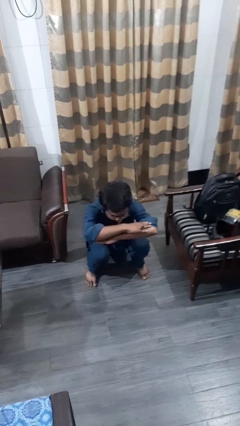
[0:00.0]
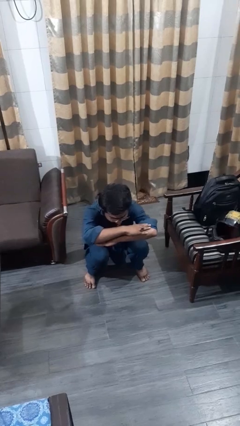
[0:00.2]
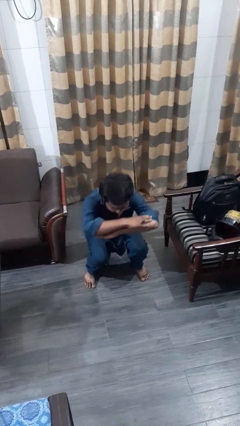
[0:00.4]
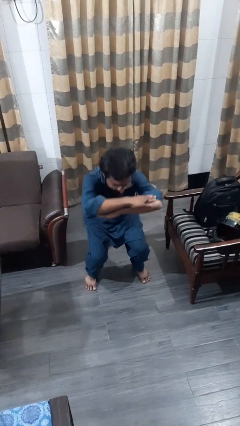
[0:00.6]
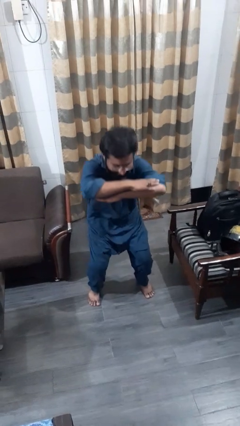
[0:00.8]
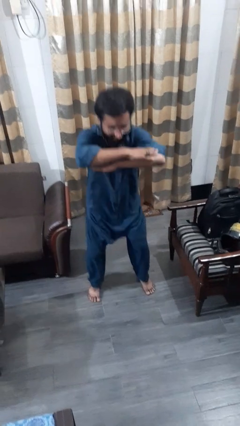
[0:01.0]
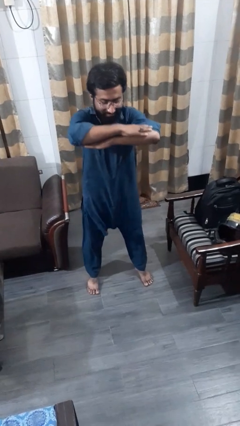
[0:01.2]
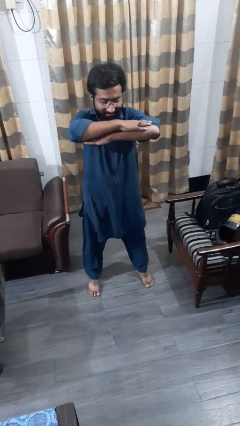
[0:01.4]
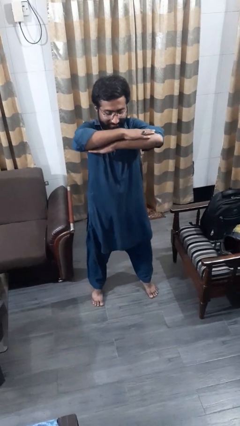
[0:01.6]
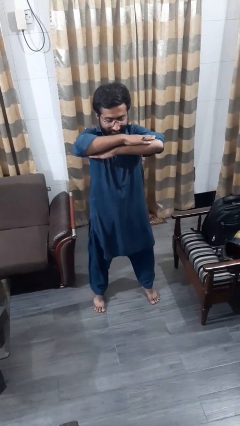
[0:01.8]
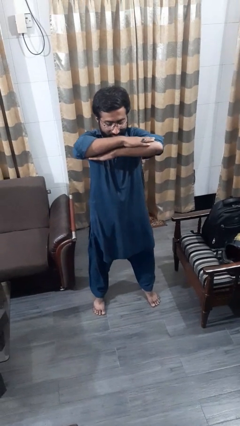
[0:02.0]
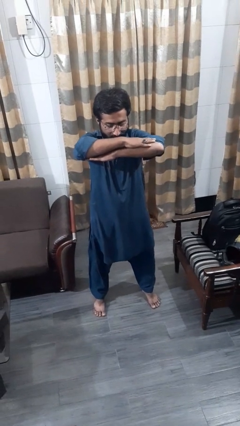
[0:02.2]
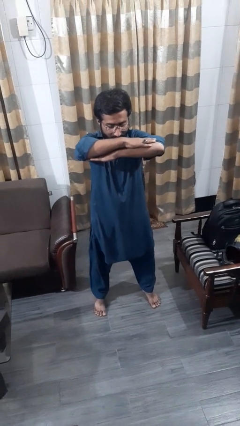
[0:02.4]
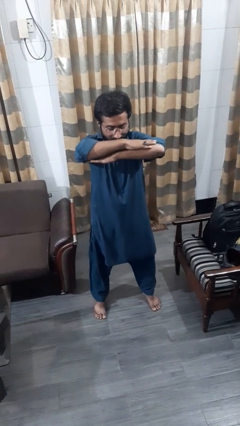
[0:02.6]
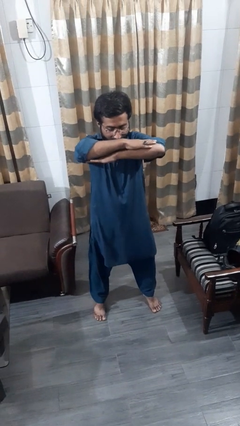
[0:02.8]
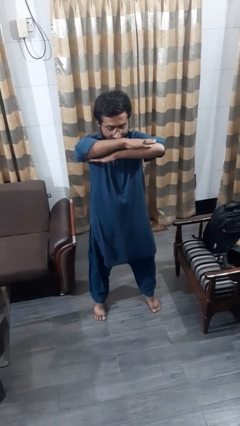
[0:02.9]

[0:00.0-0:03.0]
person stands up

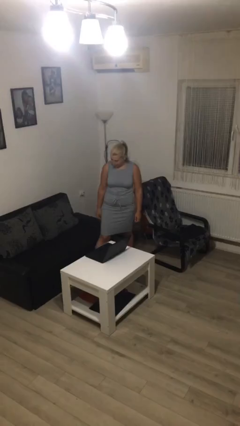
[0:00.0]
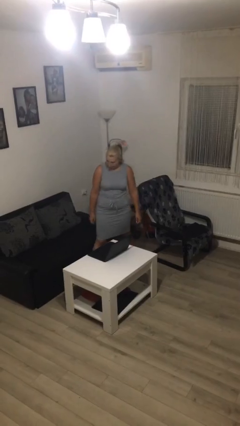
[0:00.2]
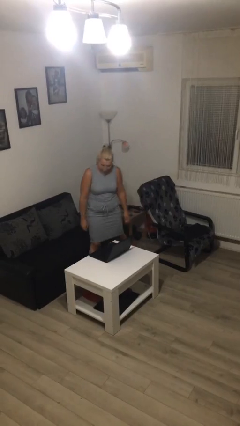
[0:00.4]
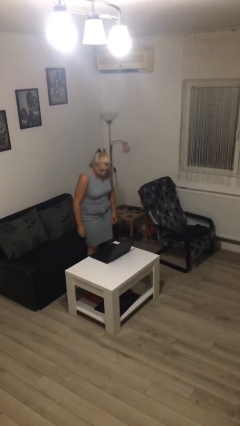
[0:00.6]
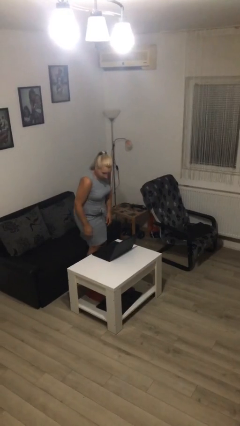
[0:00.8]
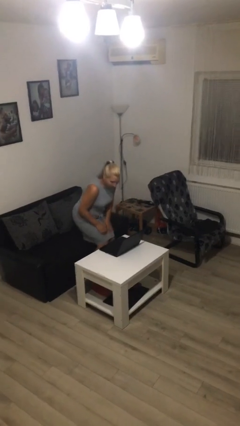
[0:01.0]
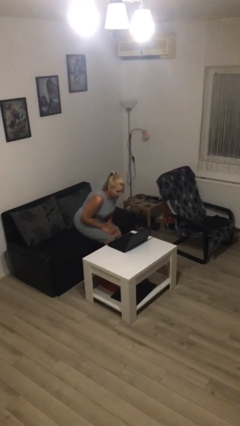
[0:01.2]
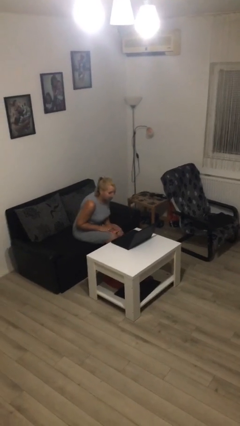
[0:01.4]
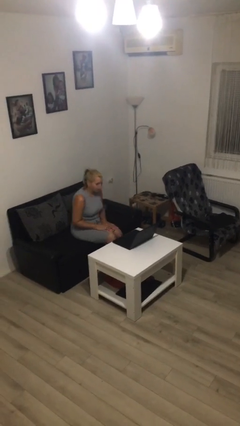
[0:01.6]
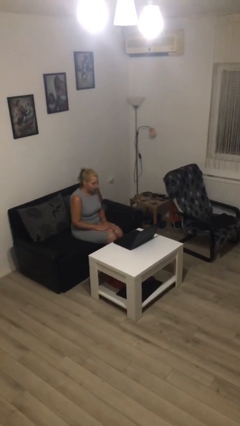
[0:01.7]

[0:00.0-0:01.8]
person sits down

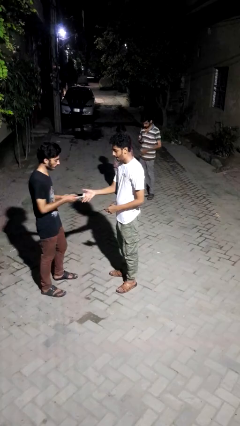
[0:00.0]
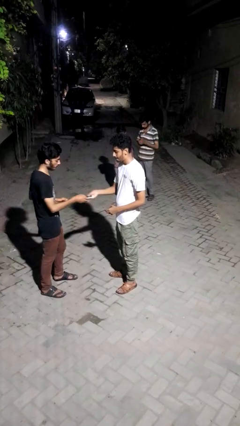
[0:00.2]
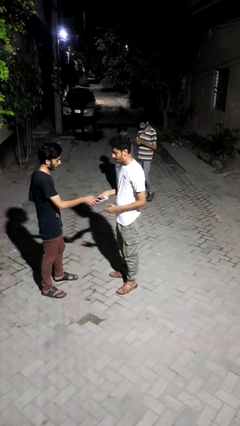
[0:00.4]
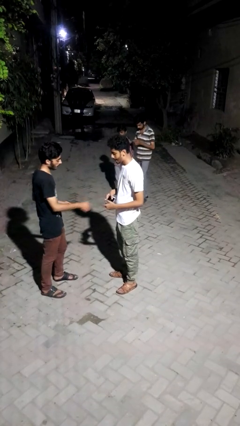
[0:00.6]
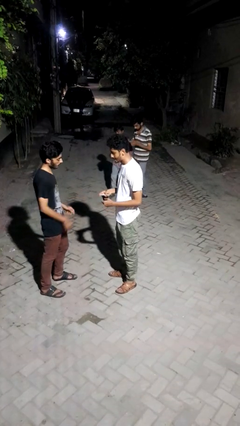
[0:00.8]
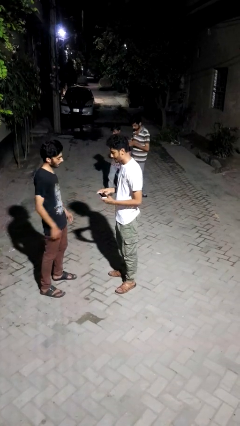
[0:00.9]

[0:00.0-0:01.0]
person transfers object to person

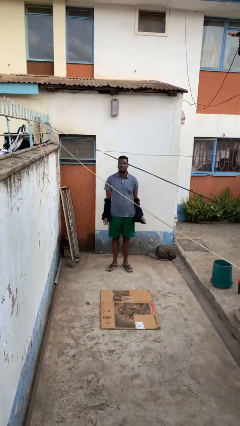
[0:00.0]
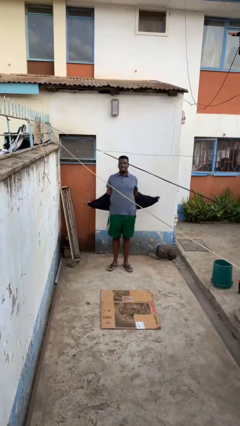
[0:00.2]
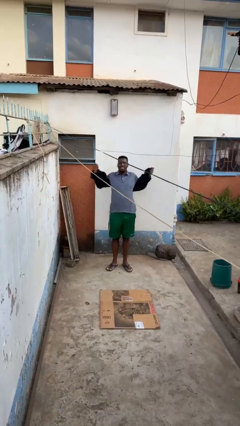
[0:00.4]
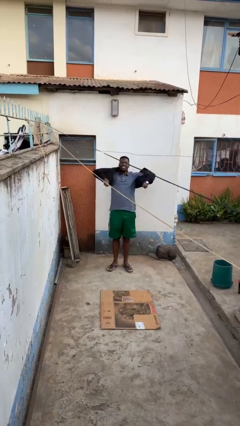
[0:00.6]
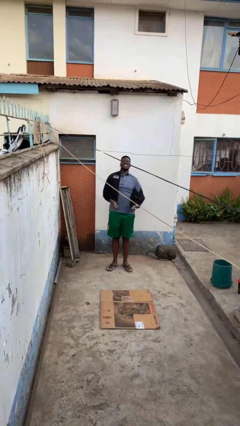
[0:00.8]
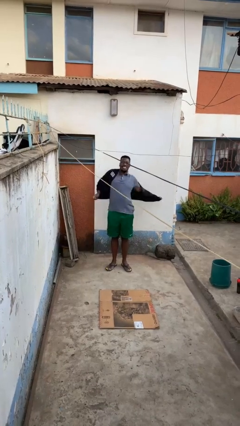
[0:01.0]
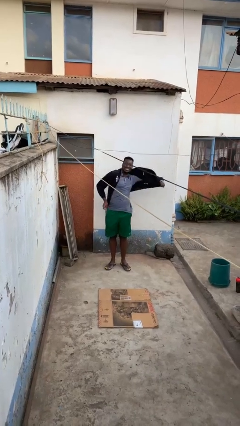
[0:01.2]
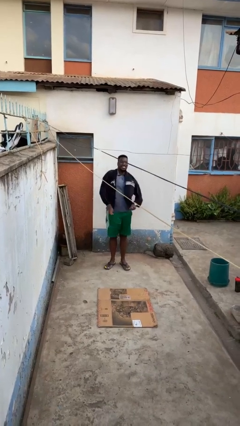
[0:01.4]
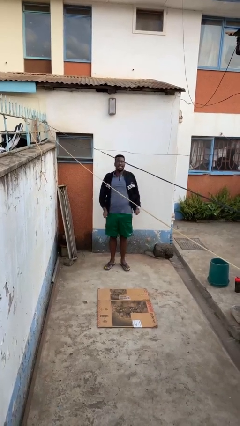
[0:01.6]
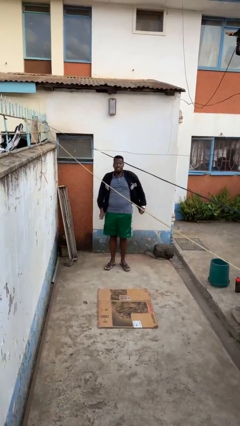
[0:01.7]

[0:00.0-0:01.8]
person puts on jacket

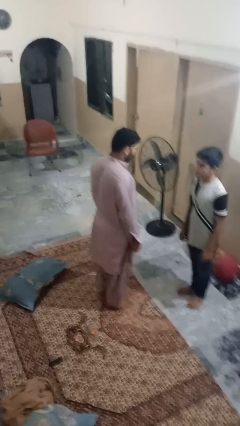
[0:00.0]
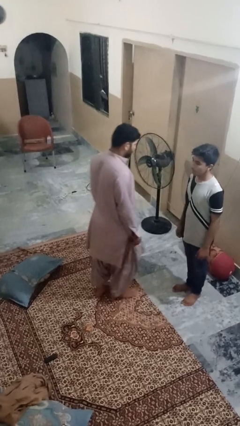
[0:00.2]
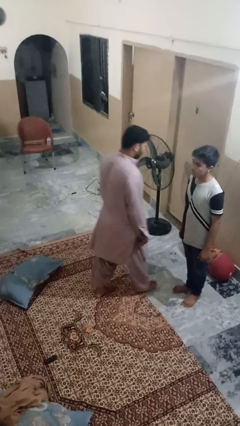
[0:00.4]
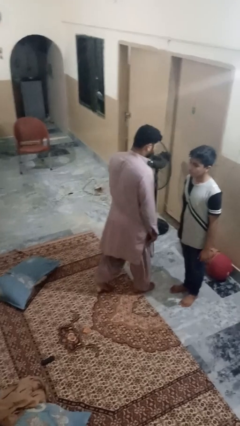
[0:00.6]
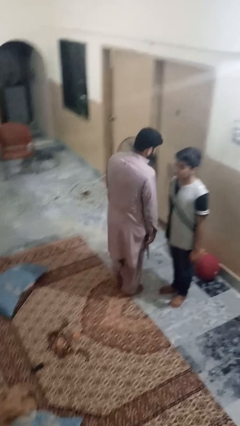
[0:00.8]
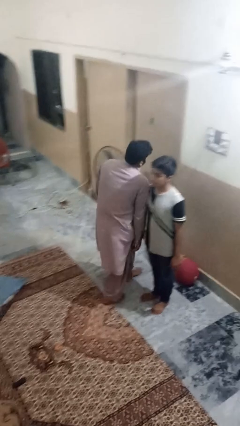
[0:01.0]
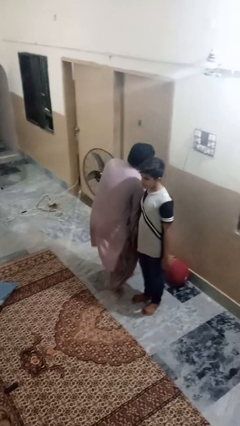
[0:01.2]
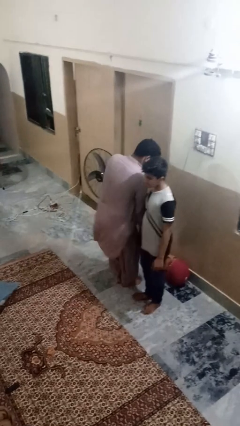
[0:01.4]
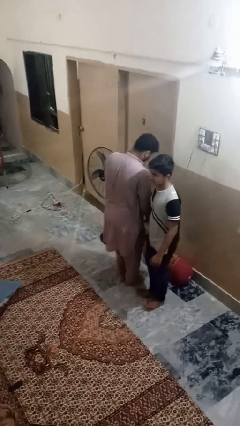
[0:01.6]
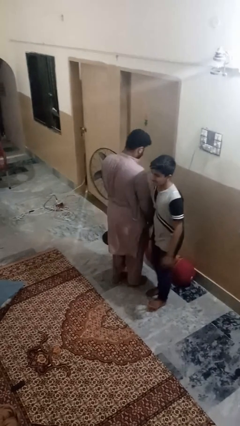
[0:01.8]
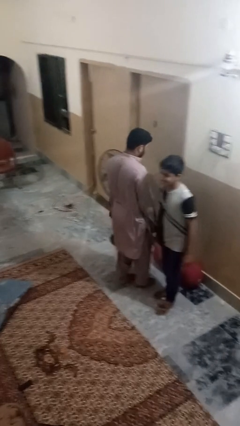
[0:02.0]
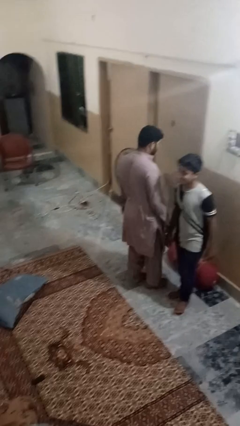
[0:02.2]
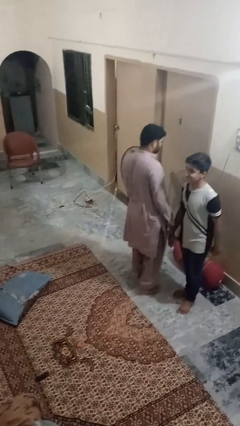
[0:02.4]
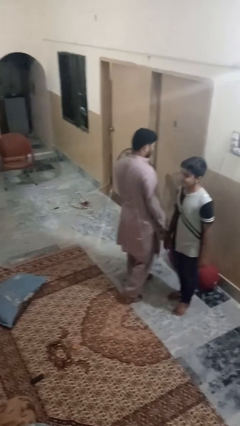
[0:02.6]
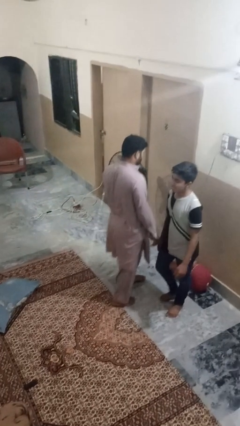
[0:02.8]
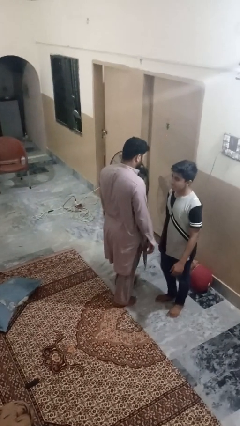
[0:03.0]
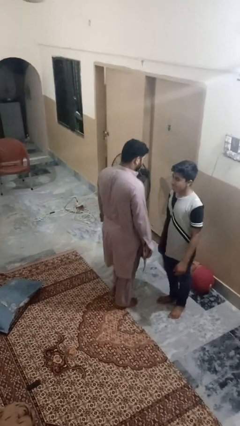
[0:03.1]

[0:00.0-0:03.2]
person bumps into person

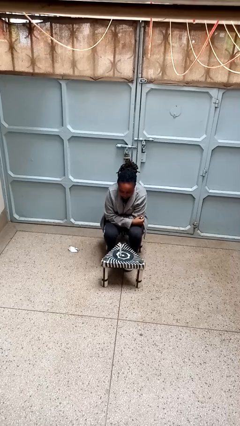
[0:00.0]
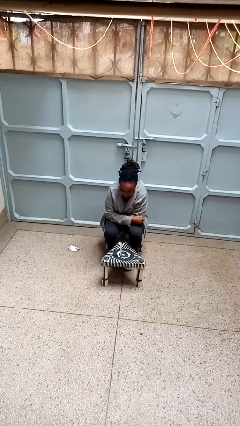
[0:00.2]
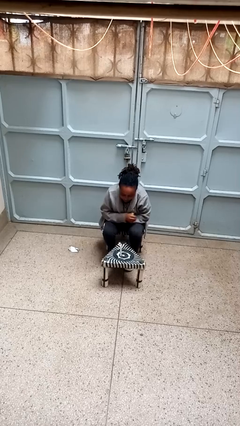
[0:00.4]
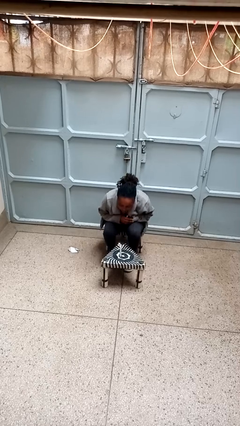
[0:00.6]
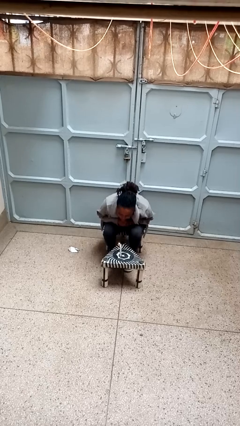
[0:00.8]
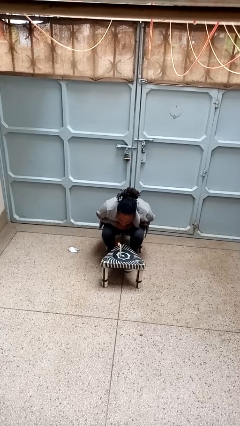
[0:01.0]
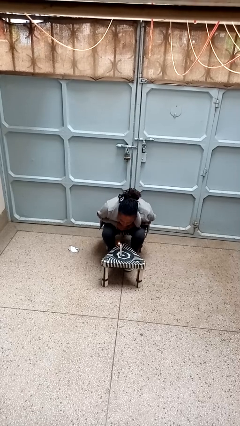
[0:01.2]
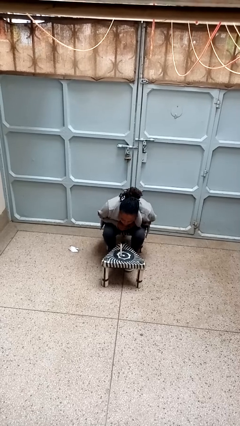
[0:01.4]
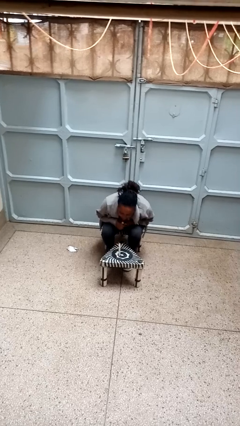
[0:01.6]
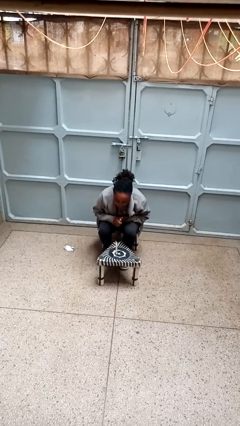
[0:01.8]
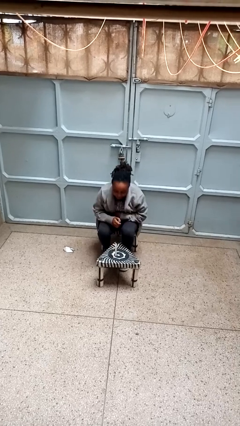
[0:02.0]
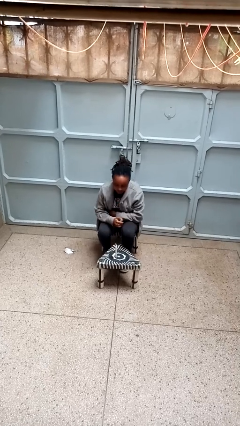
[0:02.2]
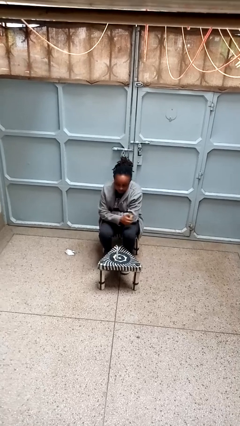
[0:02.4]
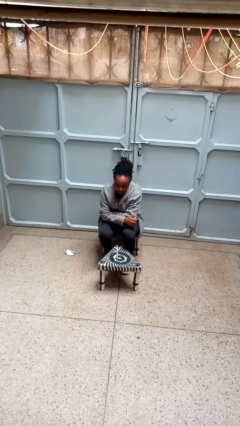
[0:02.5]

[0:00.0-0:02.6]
person extinguishes candle

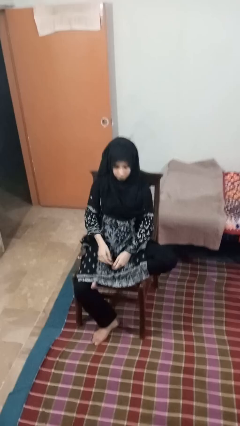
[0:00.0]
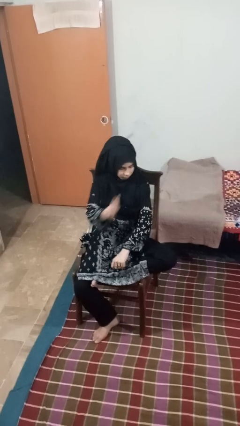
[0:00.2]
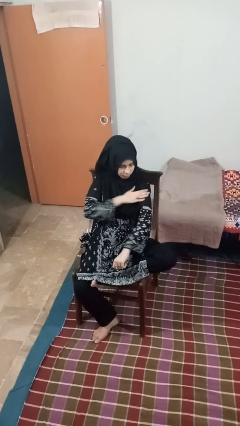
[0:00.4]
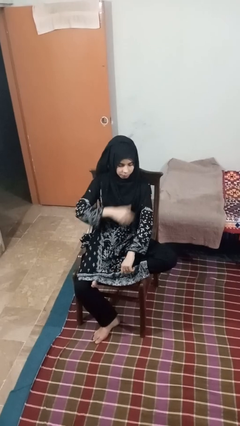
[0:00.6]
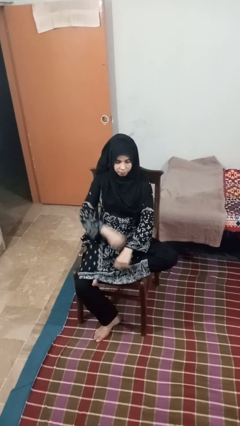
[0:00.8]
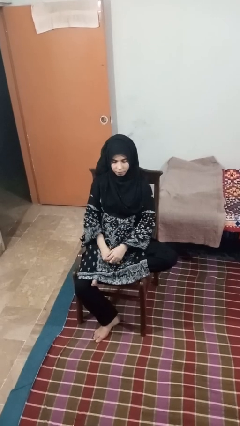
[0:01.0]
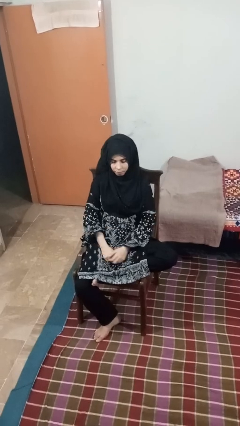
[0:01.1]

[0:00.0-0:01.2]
person swats bug

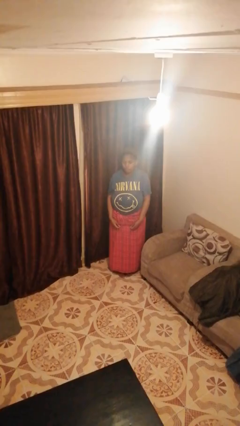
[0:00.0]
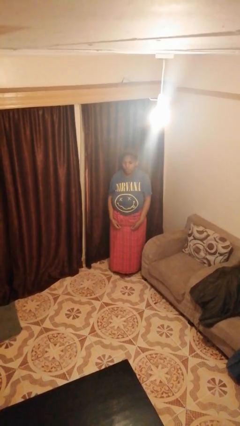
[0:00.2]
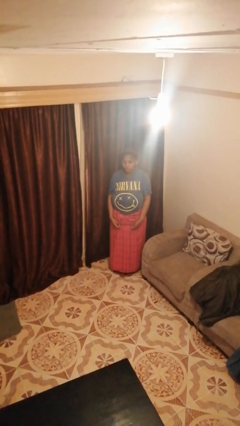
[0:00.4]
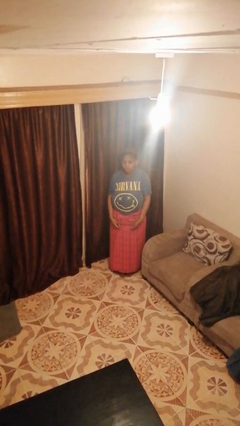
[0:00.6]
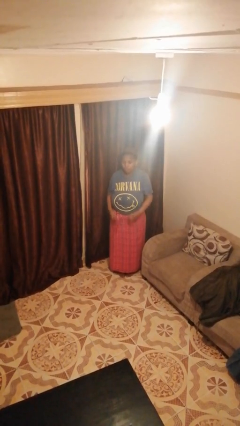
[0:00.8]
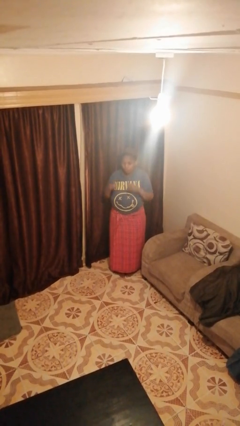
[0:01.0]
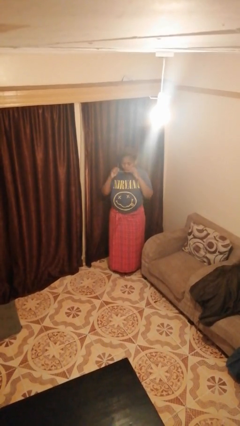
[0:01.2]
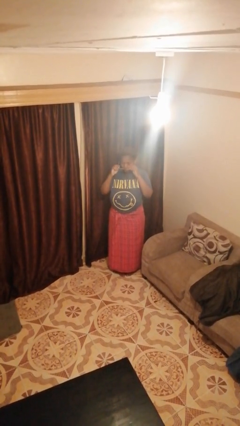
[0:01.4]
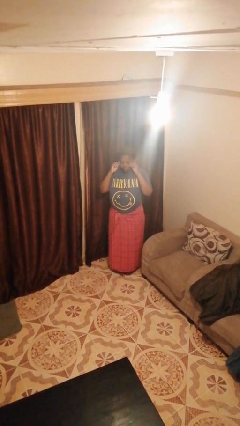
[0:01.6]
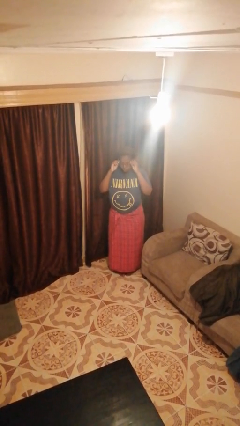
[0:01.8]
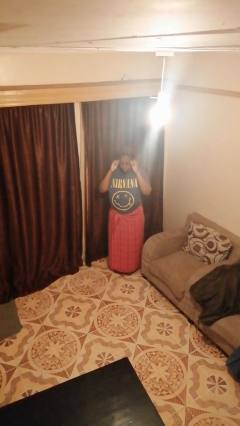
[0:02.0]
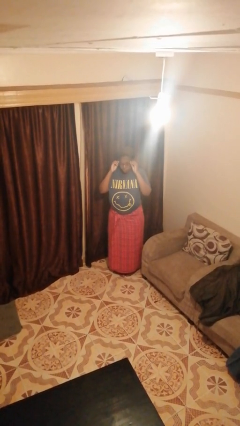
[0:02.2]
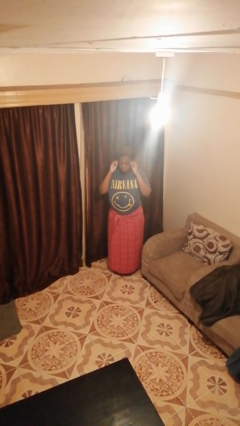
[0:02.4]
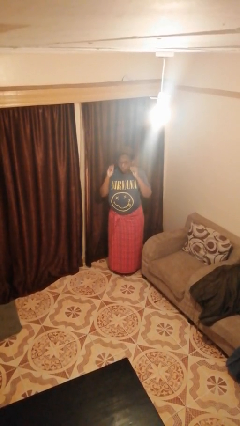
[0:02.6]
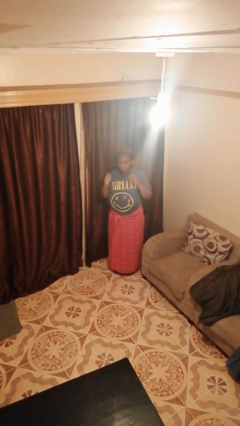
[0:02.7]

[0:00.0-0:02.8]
person puts on glasses
